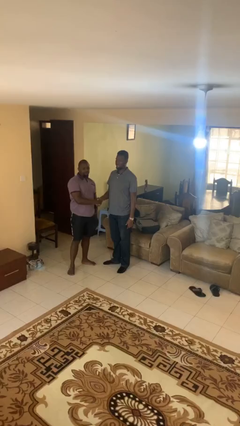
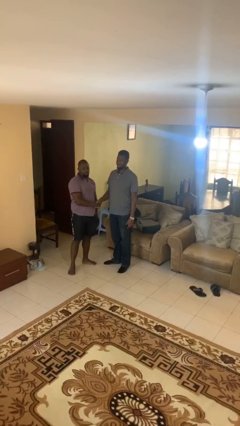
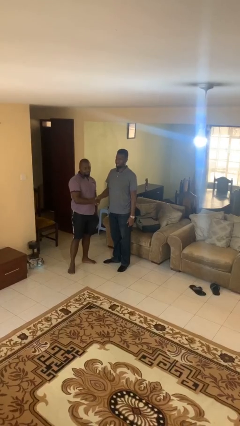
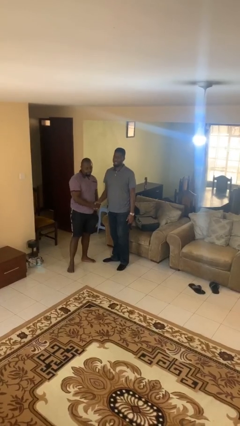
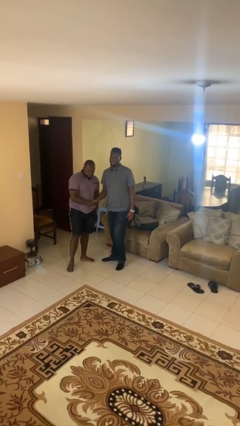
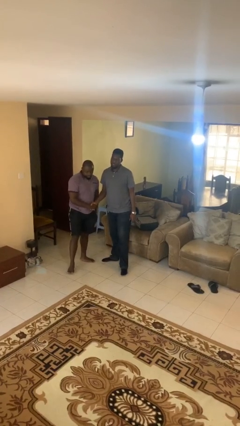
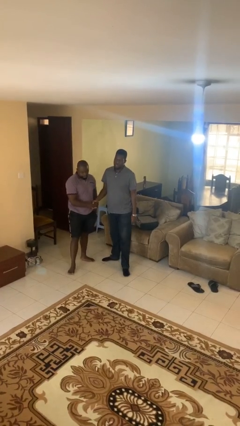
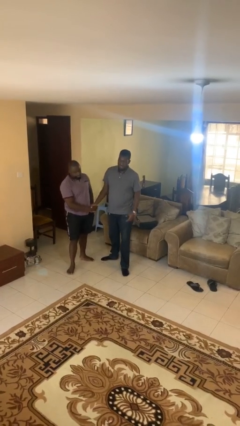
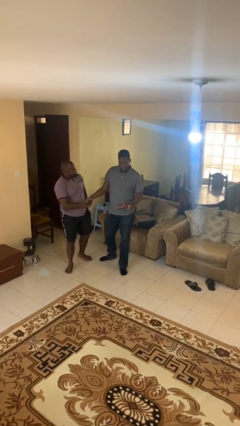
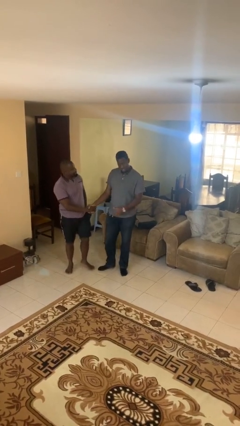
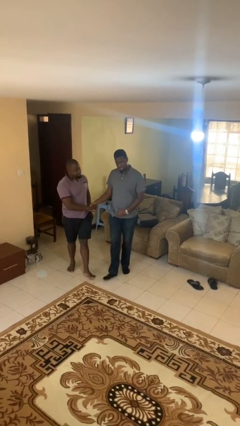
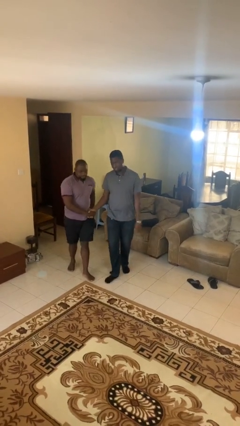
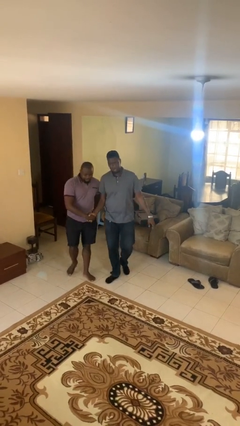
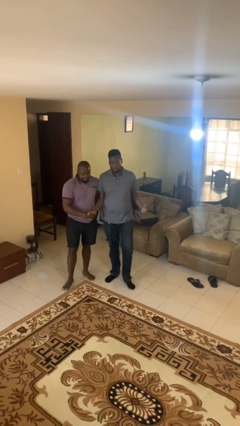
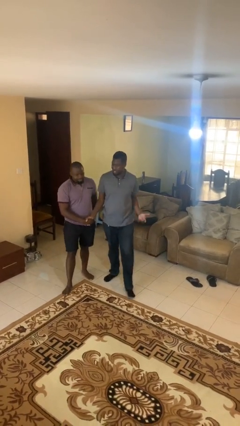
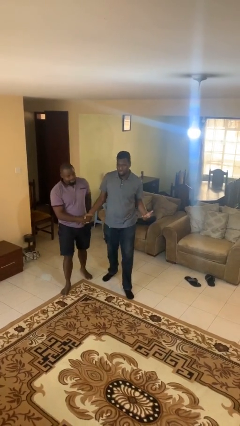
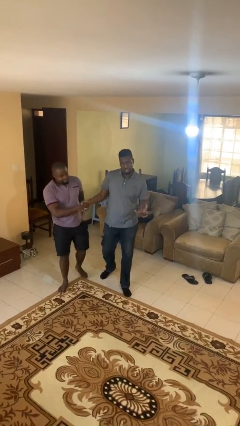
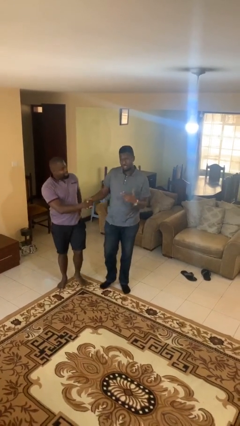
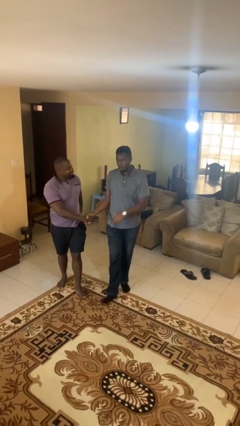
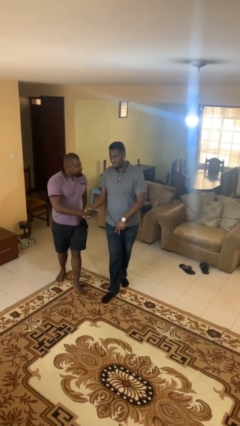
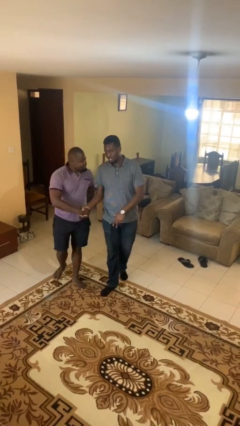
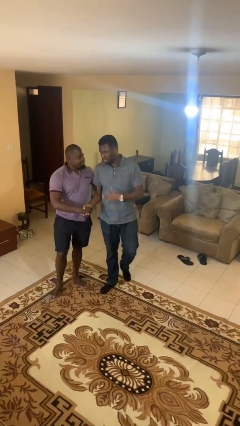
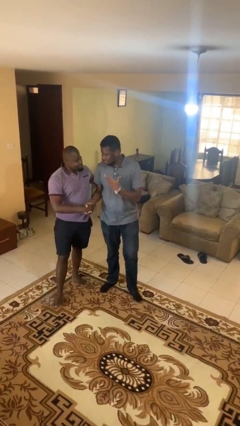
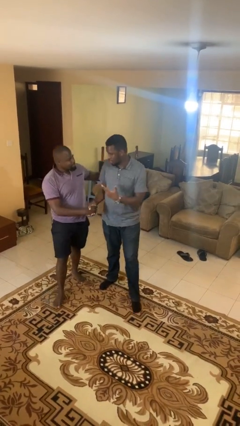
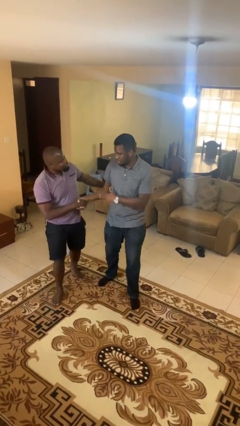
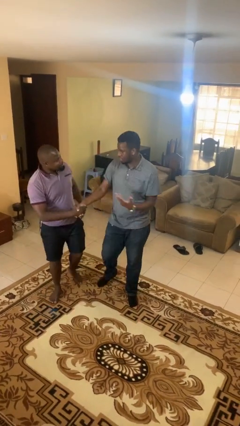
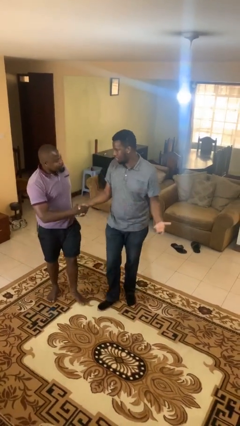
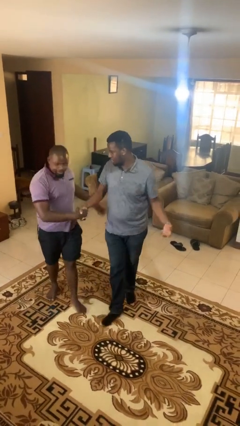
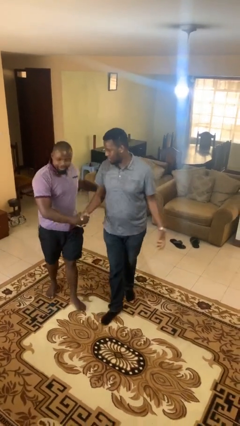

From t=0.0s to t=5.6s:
person holds hand

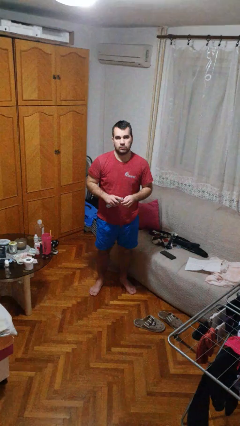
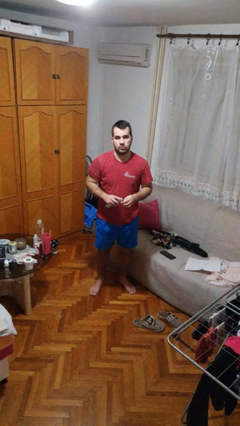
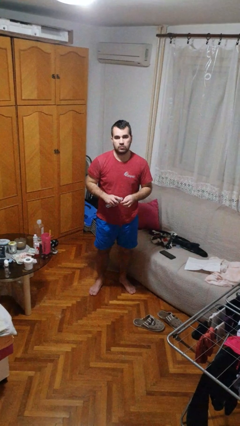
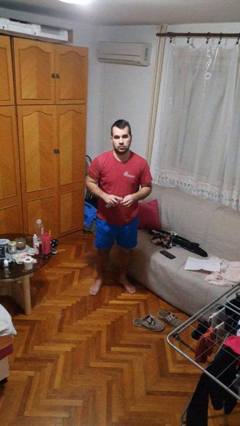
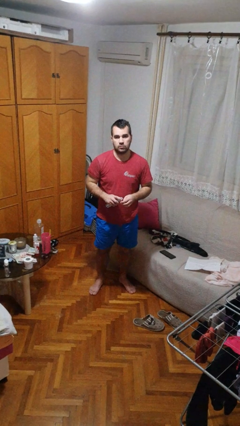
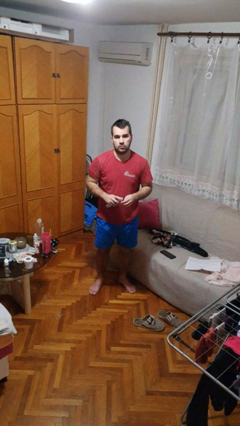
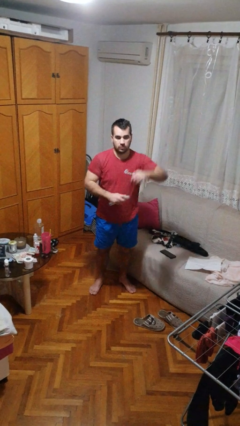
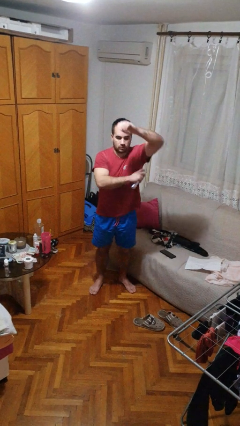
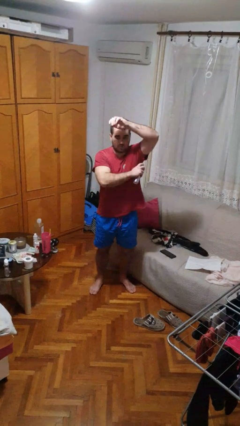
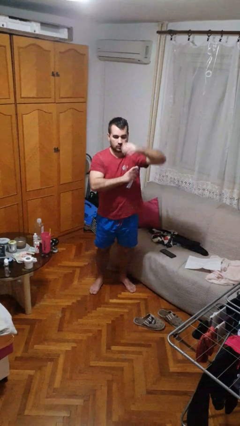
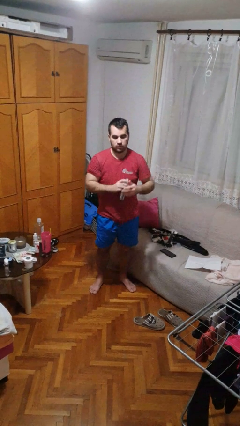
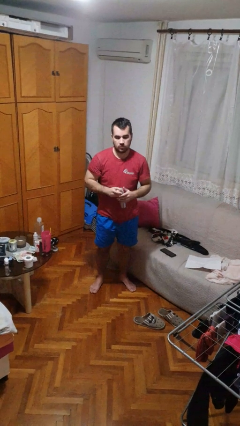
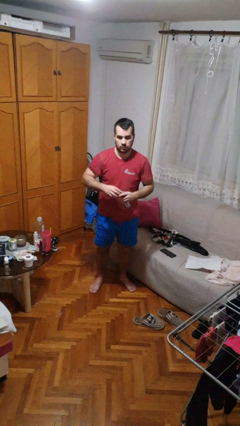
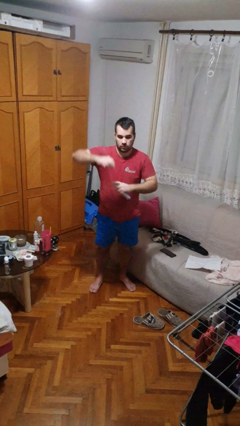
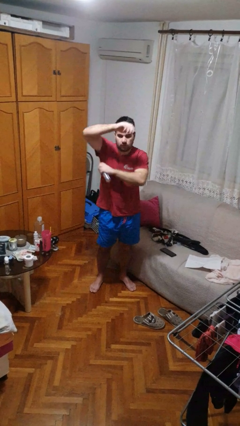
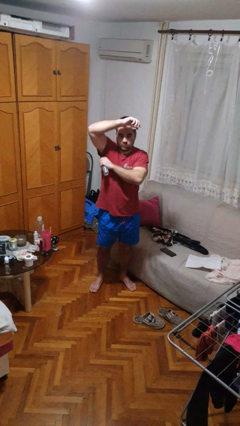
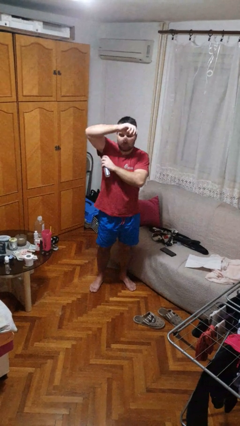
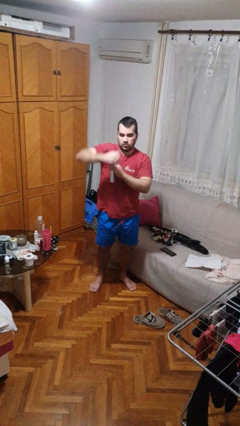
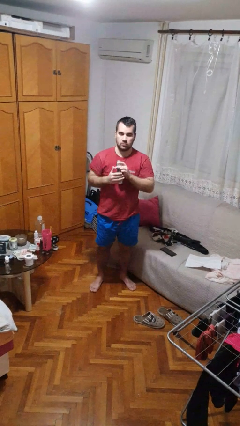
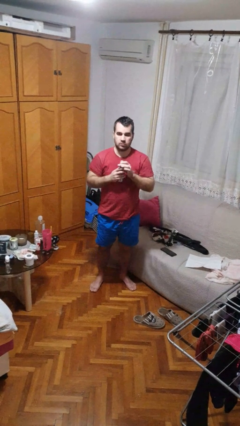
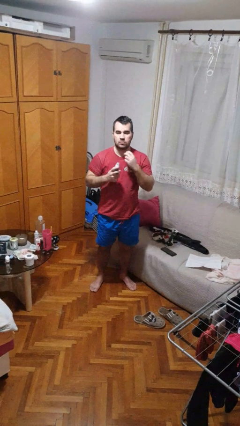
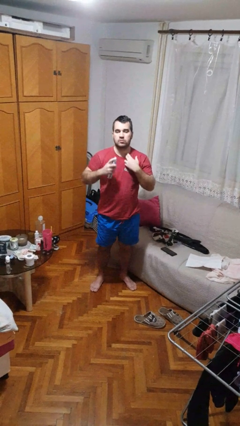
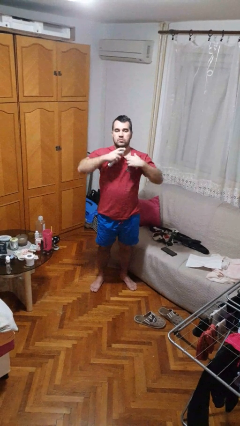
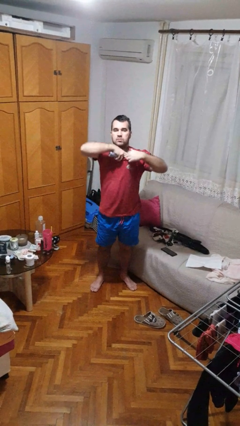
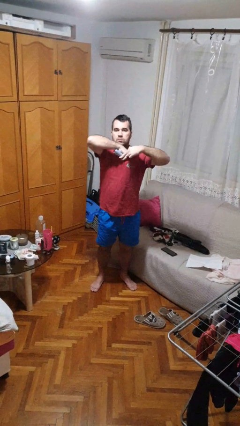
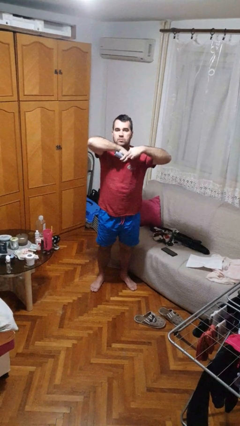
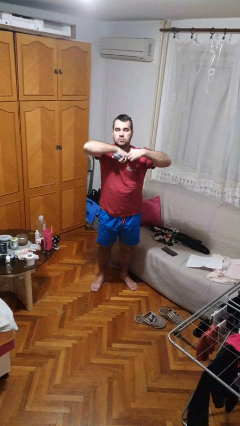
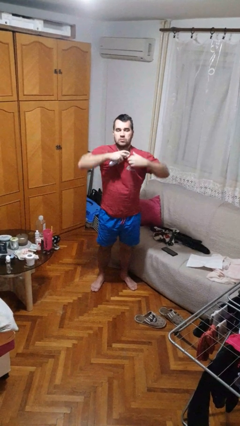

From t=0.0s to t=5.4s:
person applies deodorant

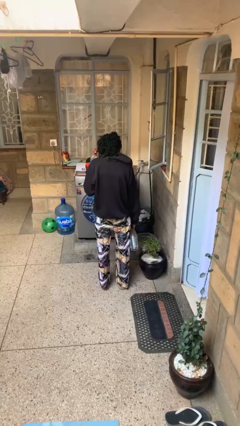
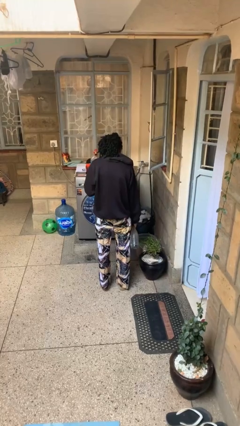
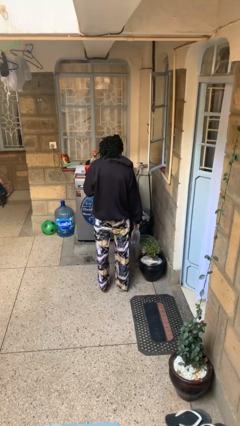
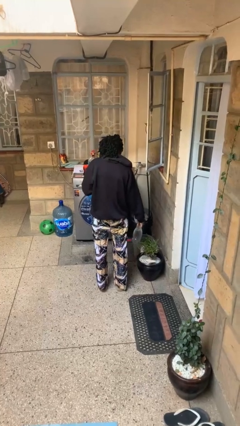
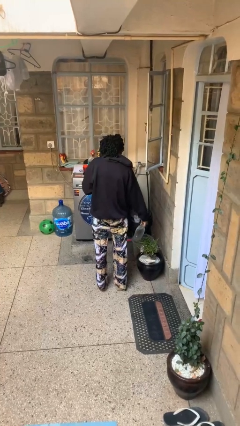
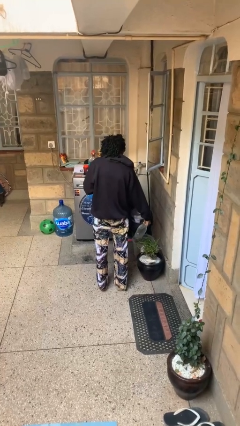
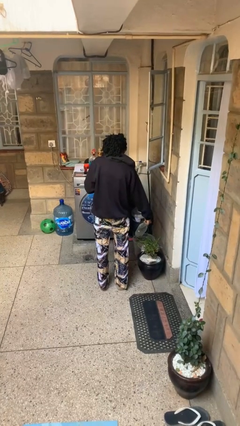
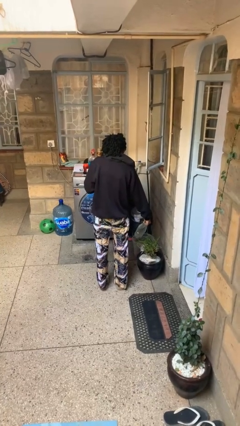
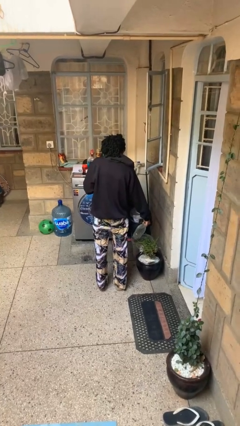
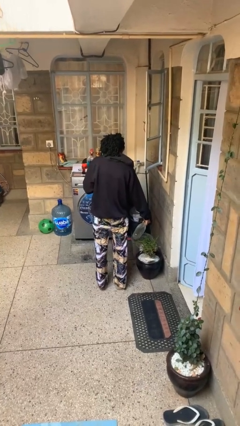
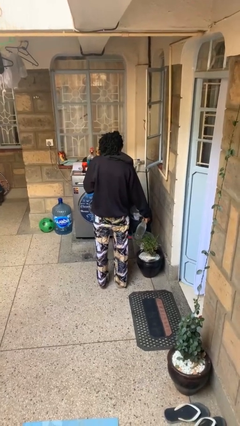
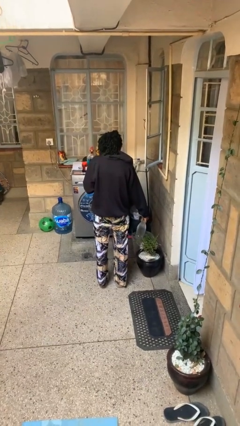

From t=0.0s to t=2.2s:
person waters houseplant

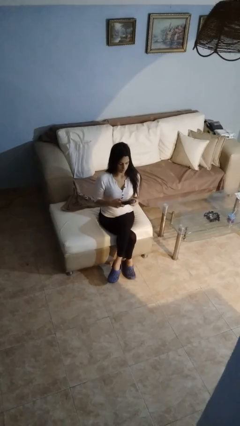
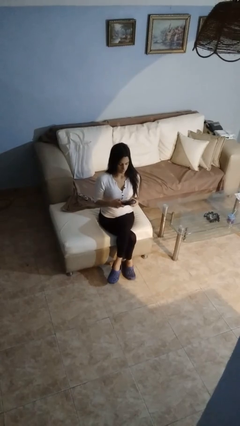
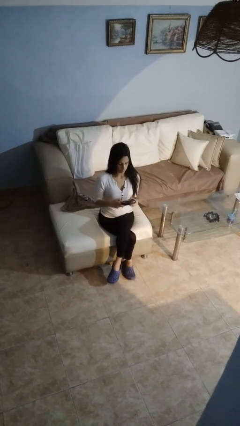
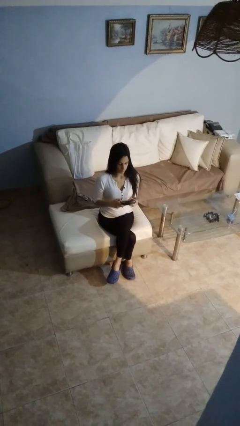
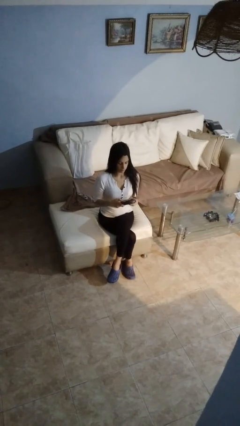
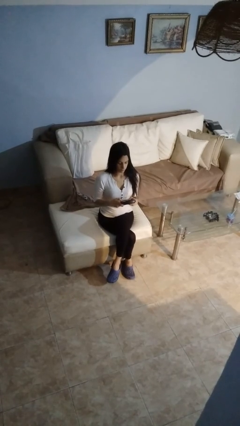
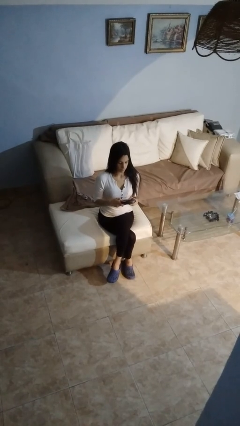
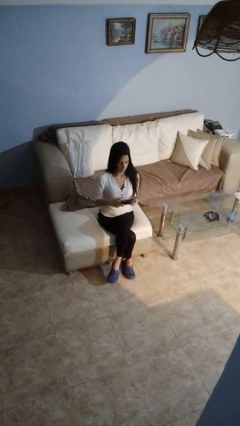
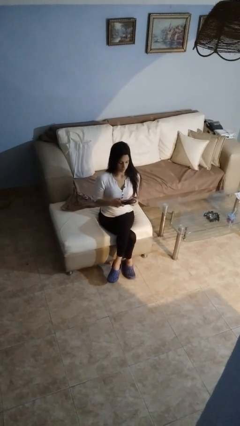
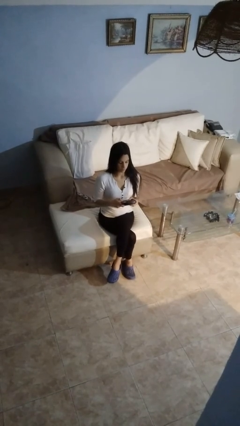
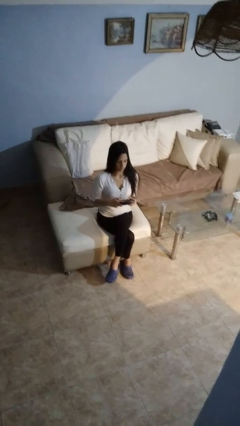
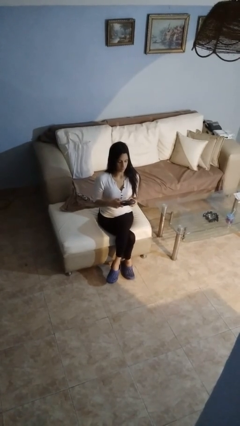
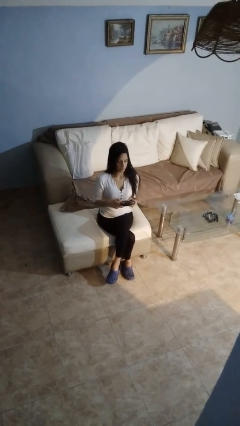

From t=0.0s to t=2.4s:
person interacts with handheld game

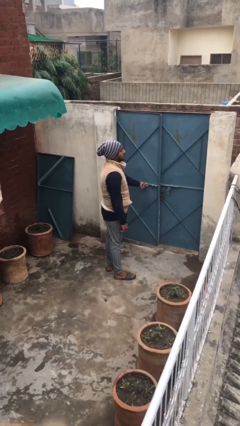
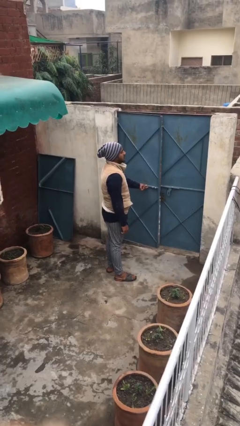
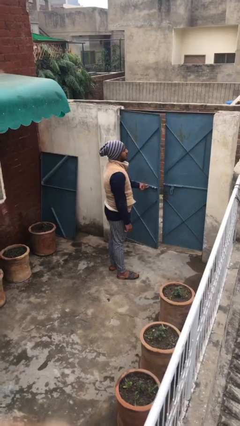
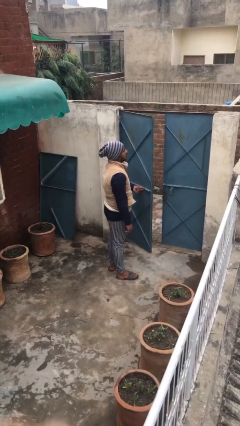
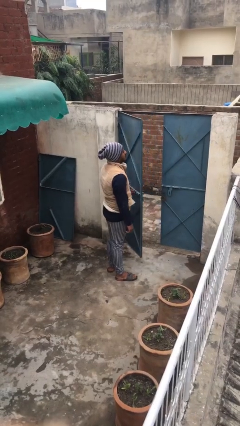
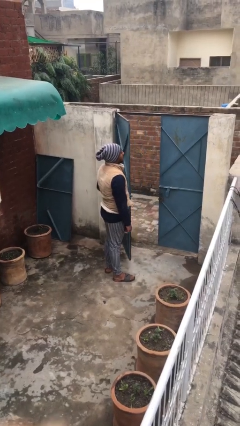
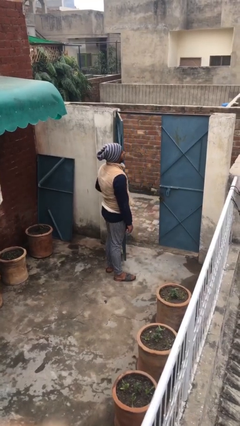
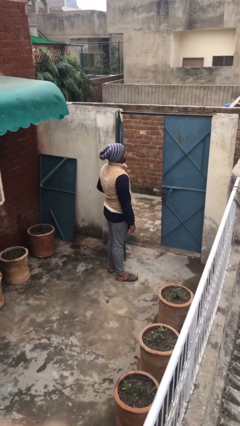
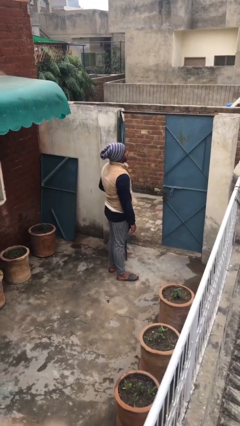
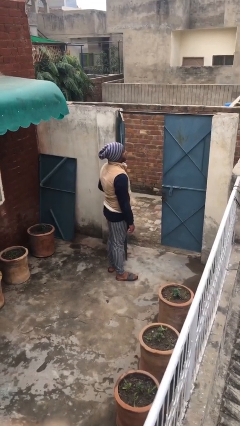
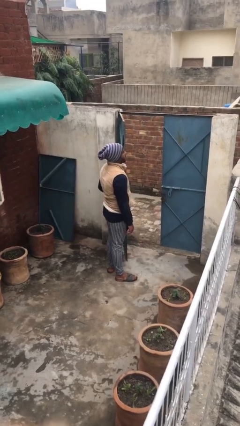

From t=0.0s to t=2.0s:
person opens facility door
